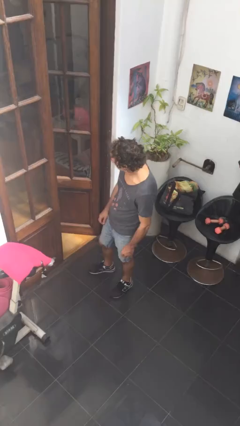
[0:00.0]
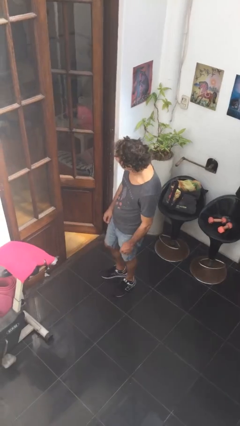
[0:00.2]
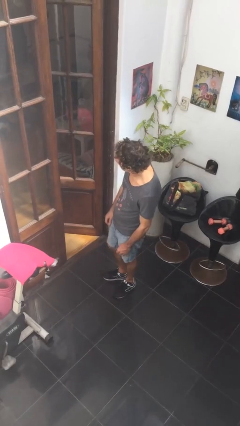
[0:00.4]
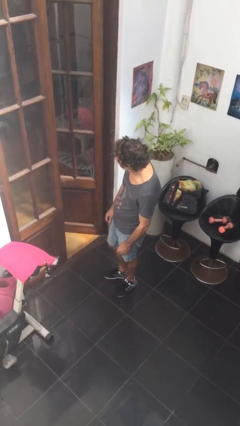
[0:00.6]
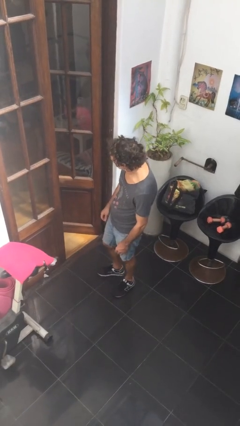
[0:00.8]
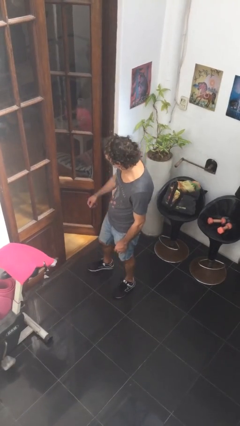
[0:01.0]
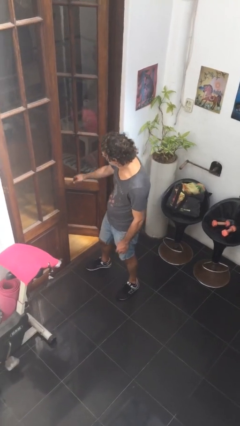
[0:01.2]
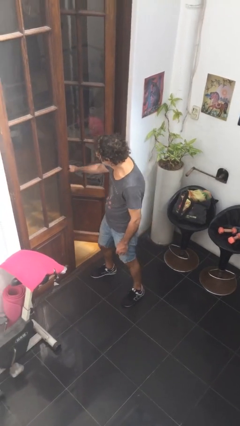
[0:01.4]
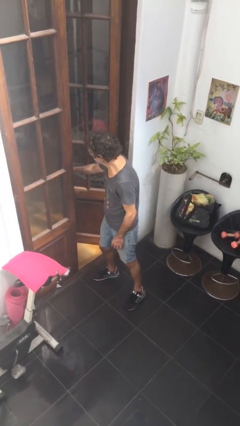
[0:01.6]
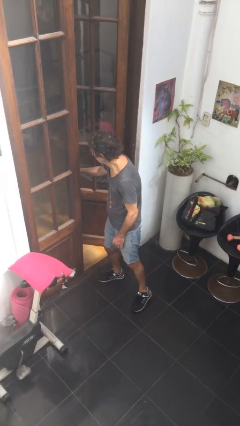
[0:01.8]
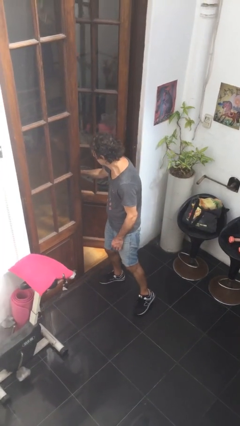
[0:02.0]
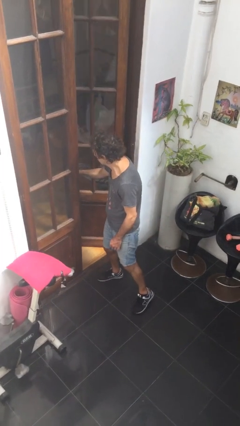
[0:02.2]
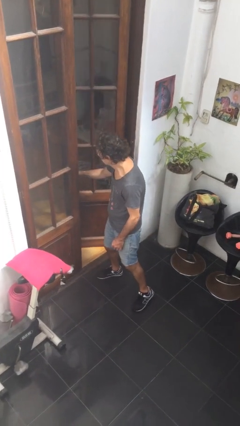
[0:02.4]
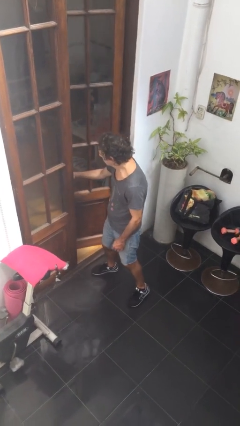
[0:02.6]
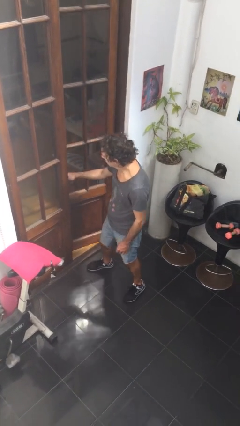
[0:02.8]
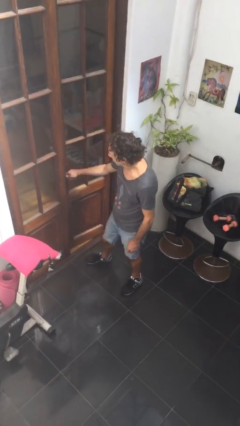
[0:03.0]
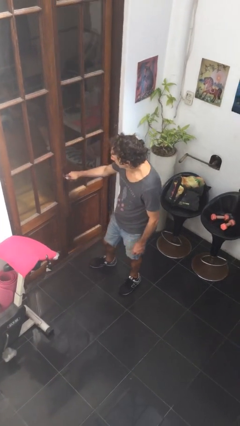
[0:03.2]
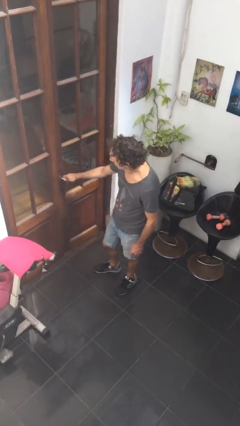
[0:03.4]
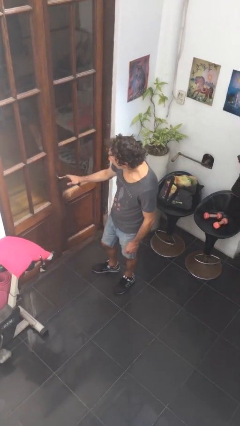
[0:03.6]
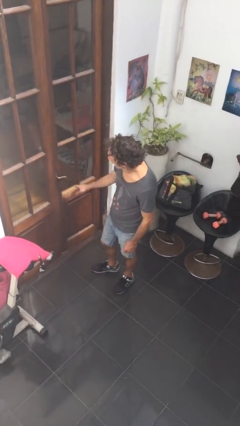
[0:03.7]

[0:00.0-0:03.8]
person closes facility door

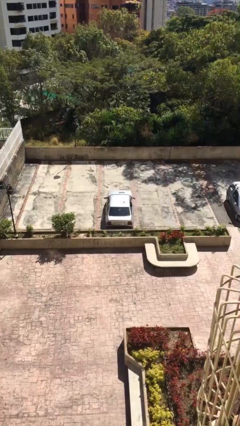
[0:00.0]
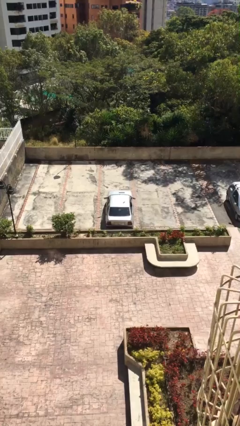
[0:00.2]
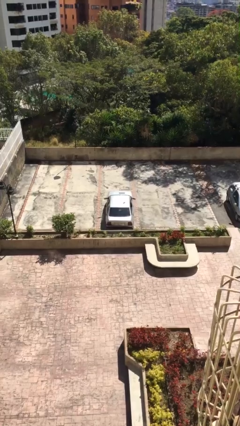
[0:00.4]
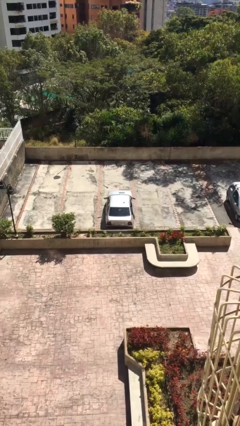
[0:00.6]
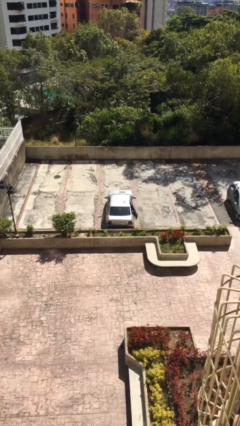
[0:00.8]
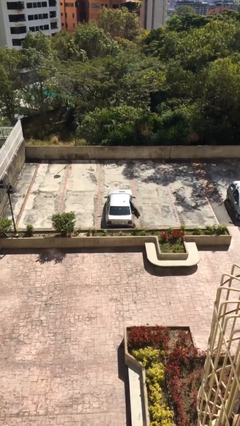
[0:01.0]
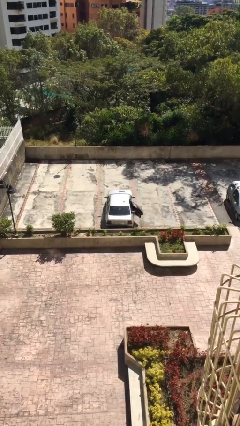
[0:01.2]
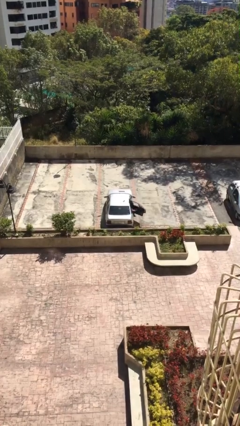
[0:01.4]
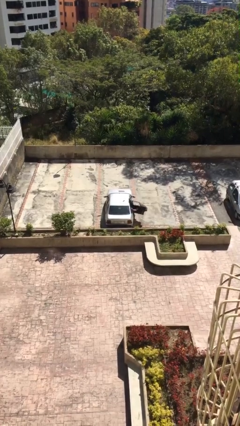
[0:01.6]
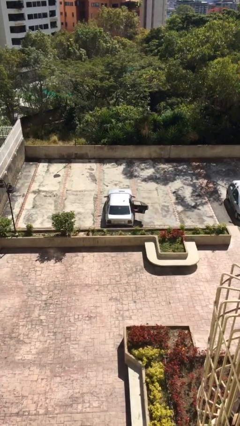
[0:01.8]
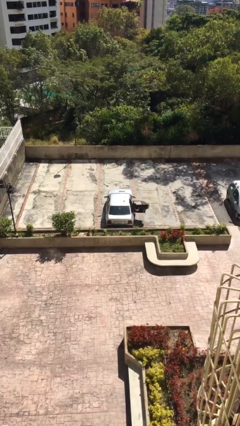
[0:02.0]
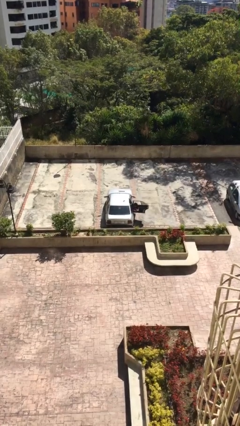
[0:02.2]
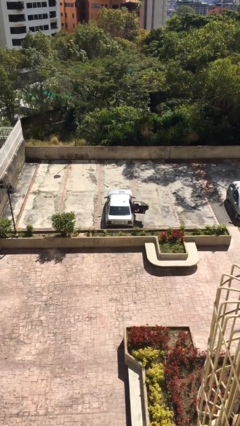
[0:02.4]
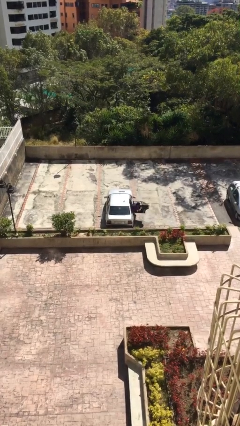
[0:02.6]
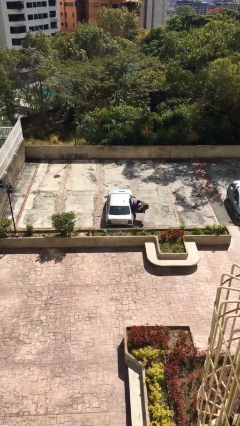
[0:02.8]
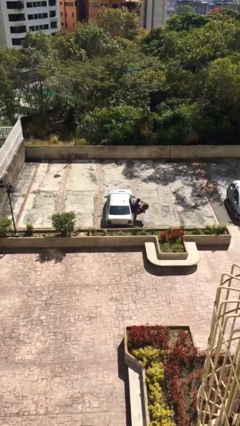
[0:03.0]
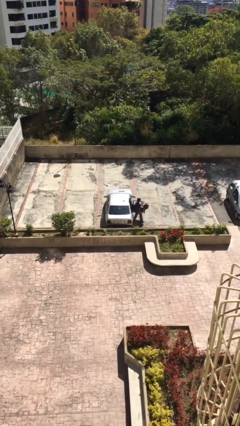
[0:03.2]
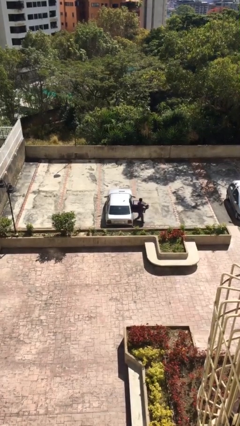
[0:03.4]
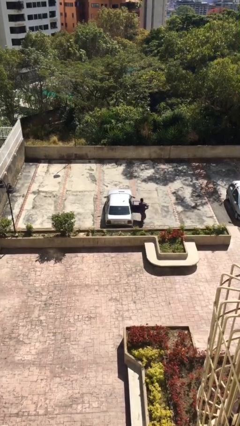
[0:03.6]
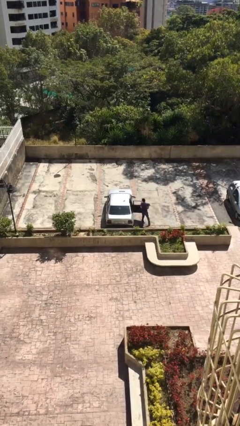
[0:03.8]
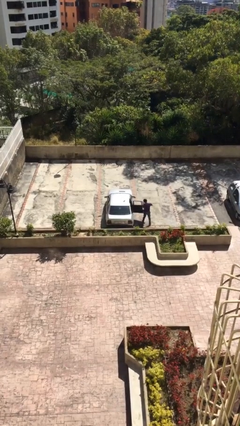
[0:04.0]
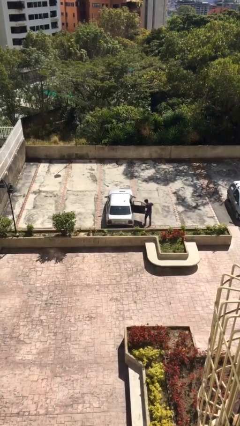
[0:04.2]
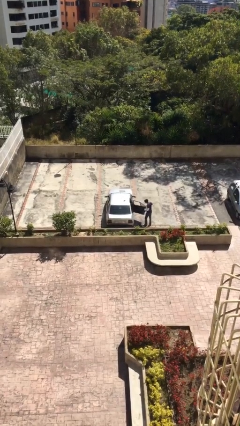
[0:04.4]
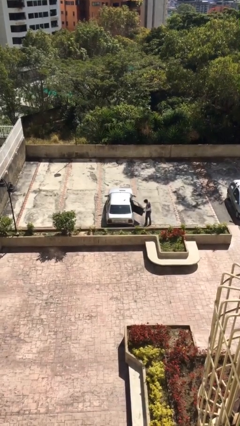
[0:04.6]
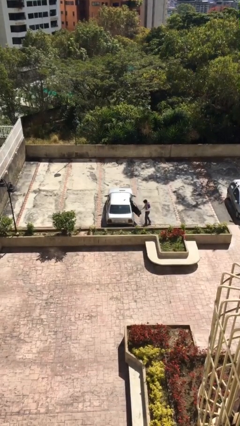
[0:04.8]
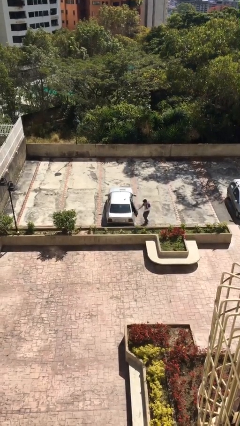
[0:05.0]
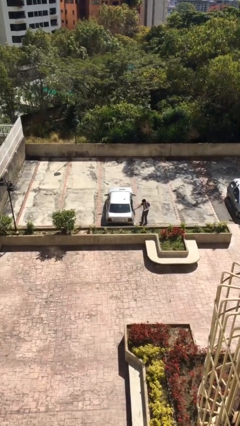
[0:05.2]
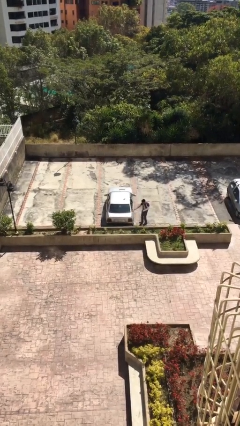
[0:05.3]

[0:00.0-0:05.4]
car drops off person

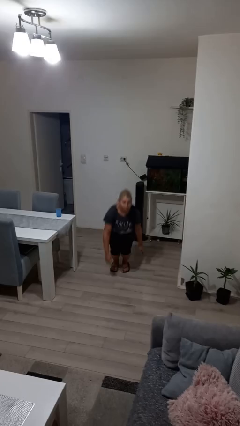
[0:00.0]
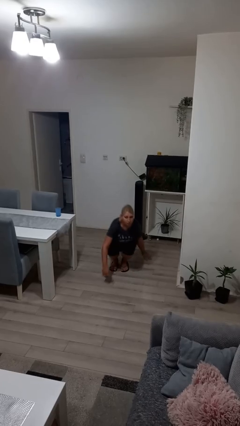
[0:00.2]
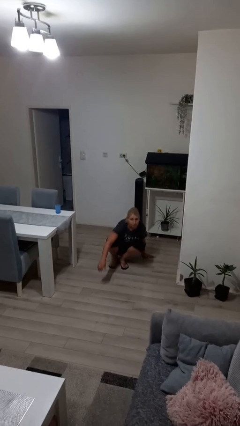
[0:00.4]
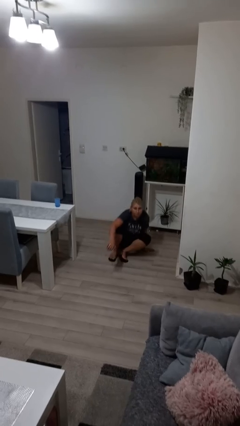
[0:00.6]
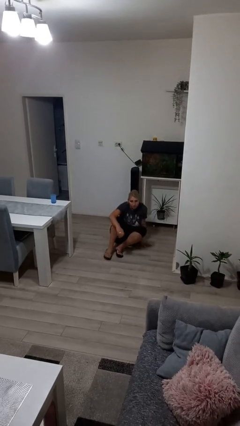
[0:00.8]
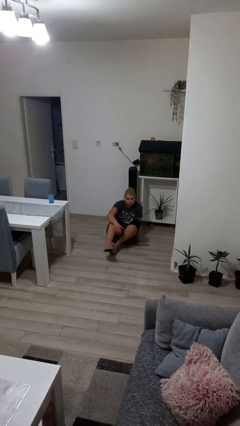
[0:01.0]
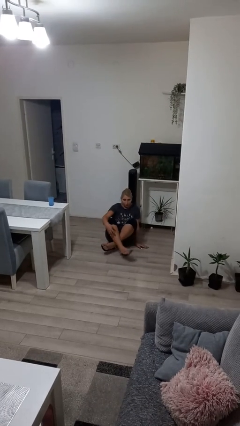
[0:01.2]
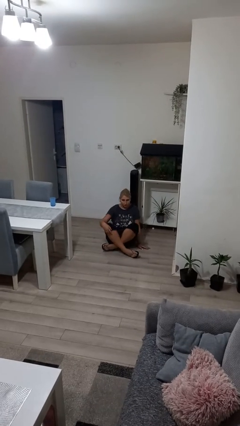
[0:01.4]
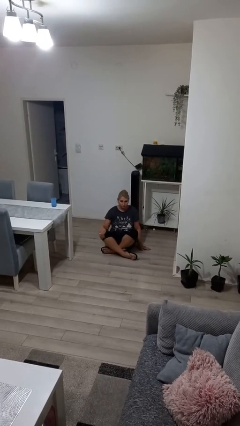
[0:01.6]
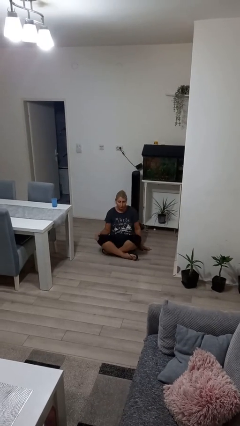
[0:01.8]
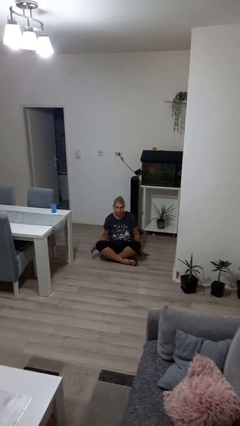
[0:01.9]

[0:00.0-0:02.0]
person sits crisscross

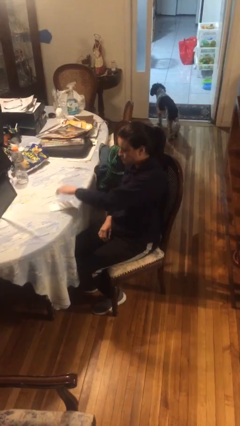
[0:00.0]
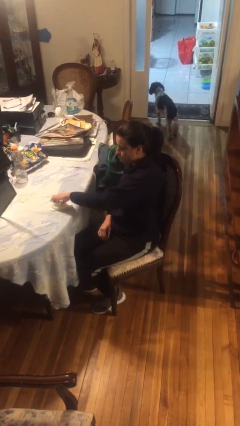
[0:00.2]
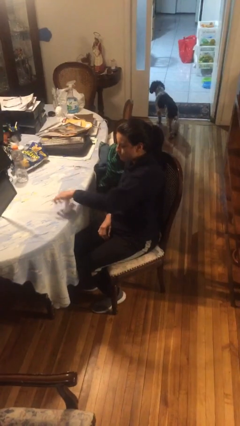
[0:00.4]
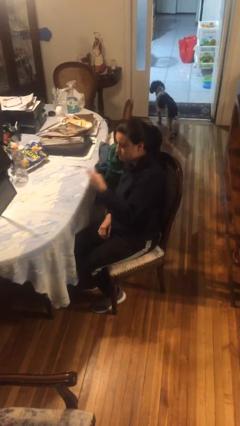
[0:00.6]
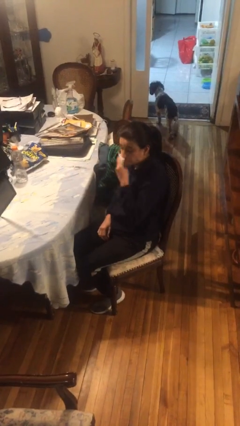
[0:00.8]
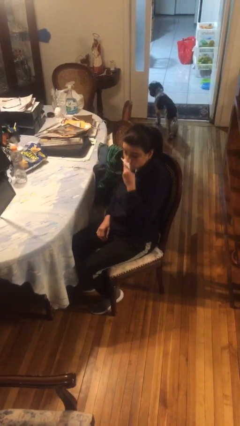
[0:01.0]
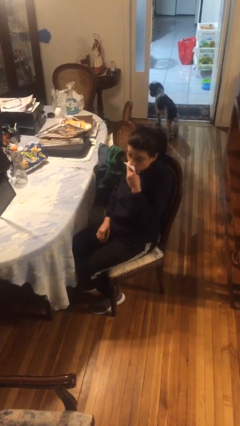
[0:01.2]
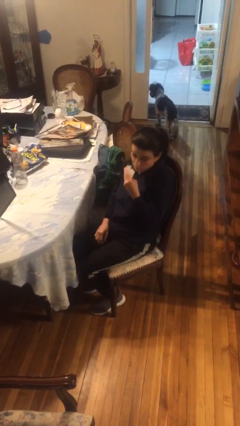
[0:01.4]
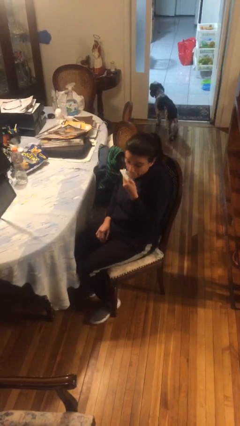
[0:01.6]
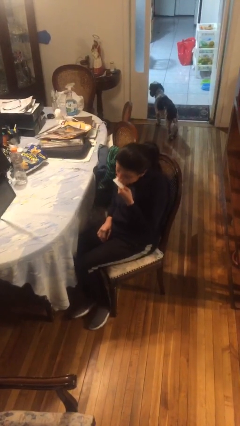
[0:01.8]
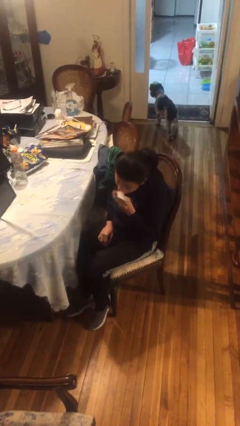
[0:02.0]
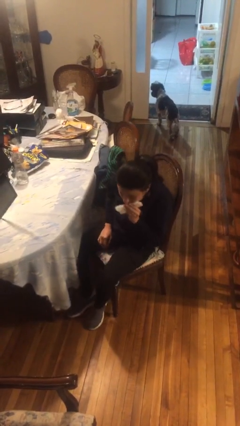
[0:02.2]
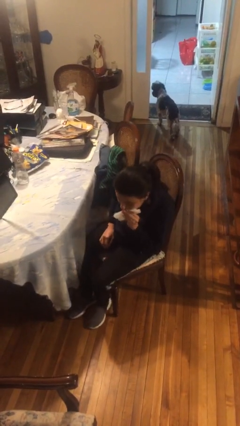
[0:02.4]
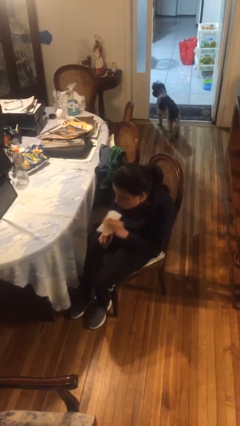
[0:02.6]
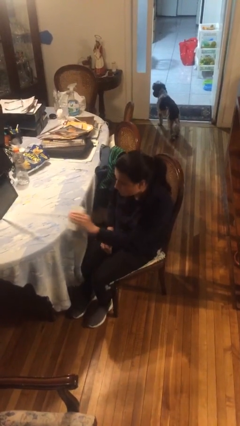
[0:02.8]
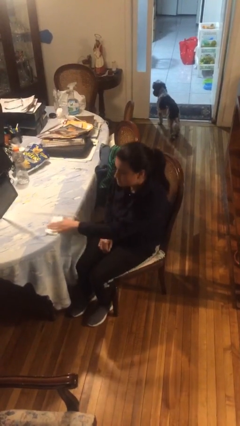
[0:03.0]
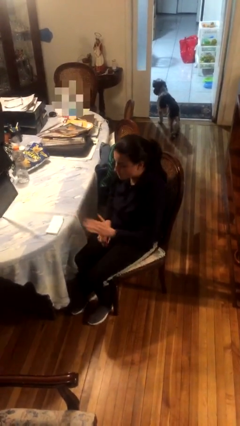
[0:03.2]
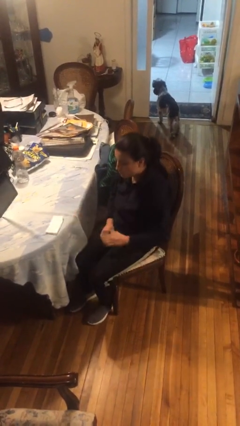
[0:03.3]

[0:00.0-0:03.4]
person wipes mouth with napkin

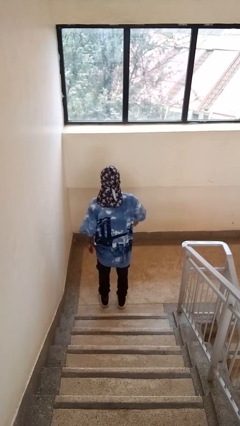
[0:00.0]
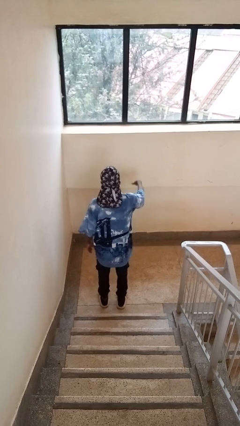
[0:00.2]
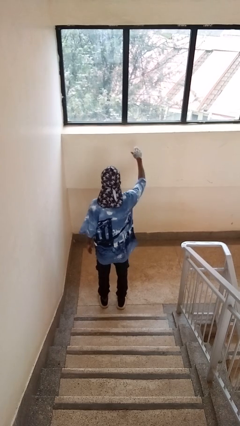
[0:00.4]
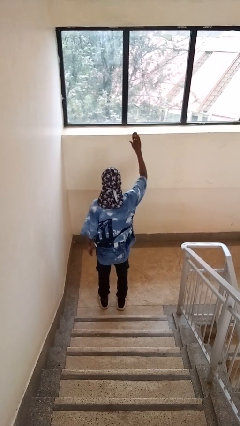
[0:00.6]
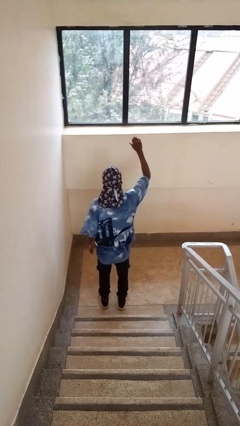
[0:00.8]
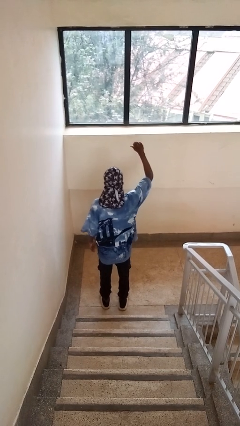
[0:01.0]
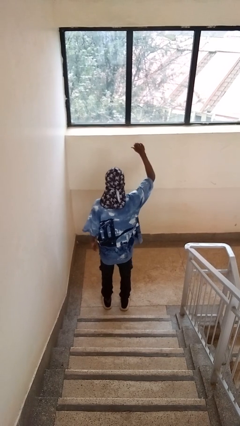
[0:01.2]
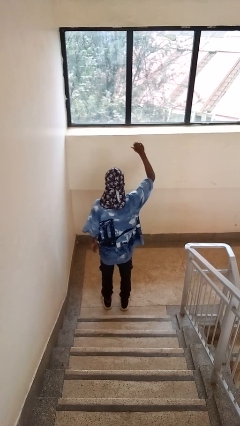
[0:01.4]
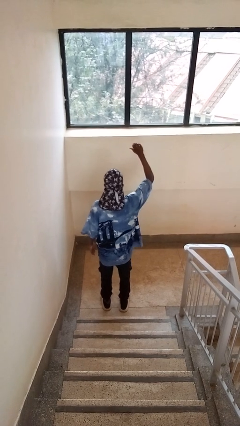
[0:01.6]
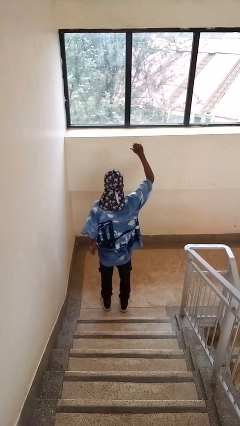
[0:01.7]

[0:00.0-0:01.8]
person gestures swipe up

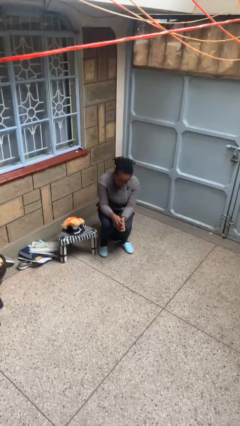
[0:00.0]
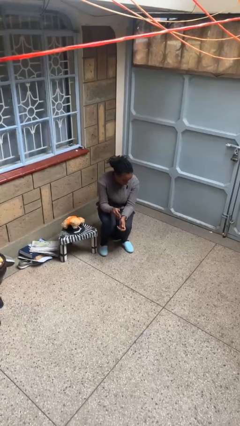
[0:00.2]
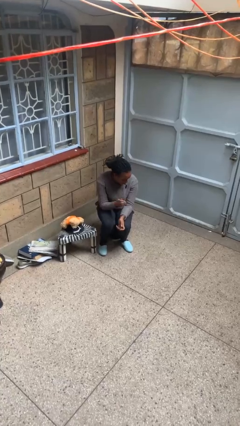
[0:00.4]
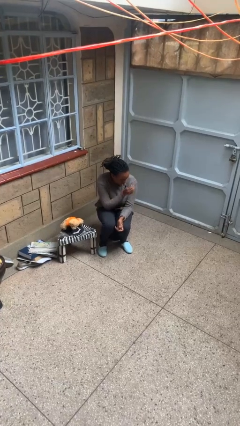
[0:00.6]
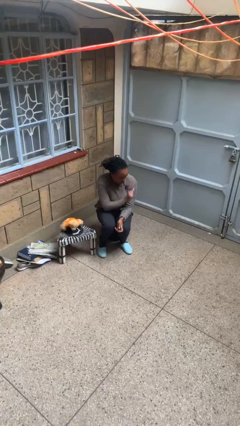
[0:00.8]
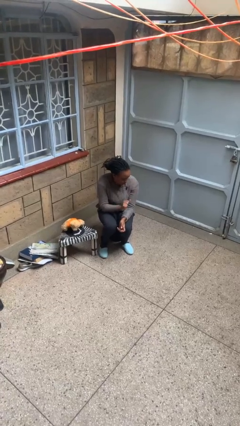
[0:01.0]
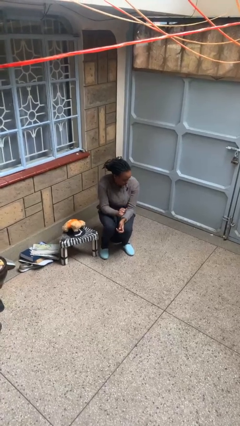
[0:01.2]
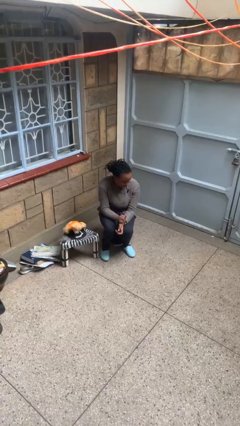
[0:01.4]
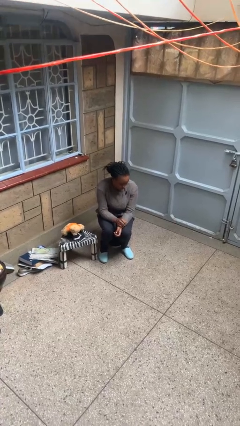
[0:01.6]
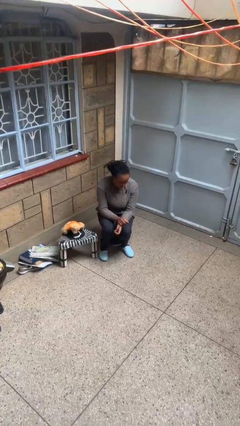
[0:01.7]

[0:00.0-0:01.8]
person swats bug
